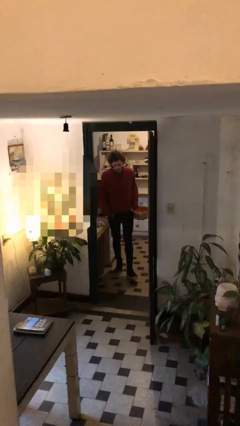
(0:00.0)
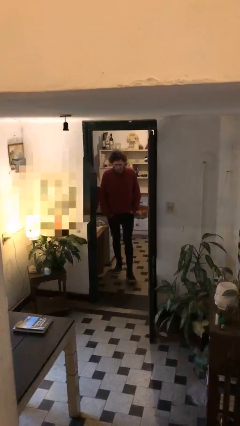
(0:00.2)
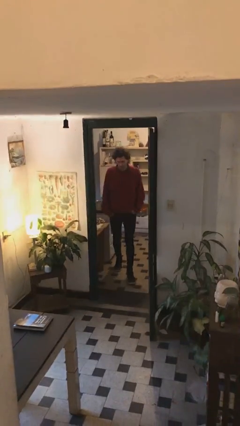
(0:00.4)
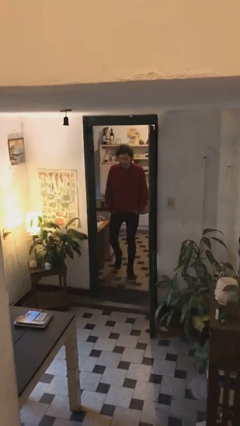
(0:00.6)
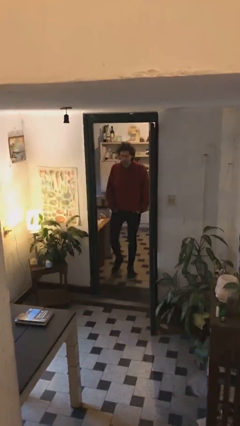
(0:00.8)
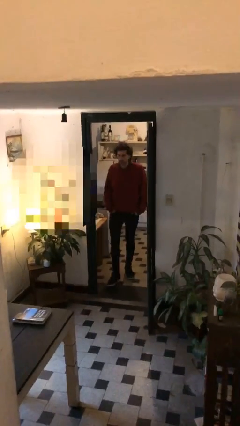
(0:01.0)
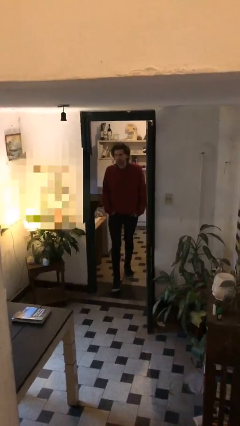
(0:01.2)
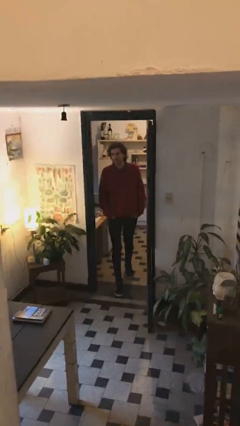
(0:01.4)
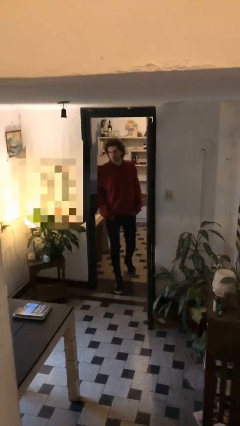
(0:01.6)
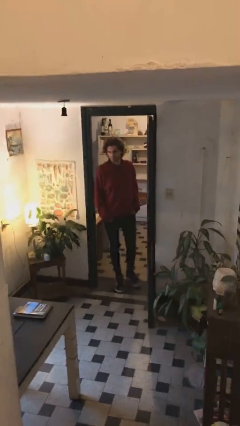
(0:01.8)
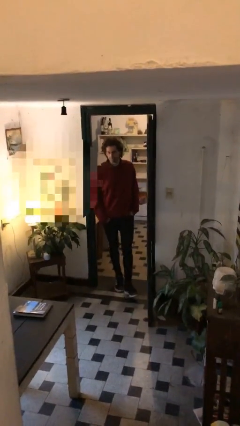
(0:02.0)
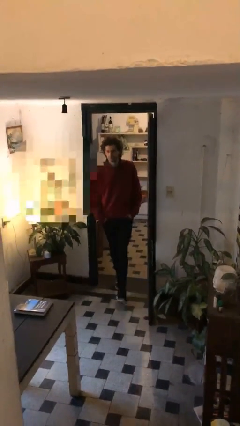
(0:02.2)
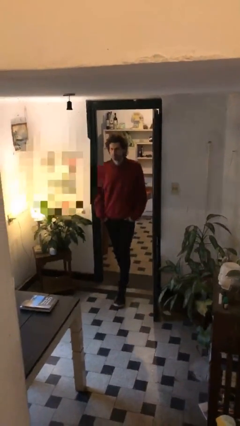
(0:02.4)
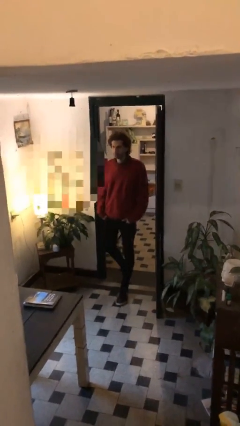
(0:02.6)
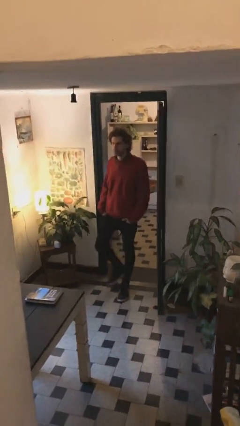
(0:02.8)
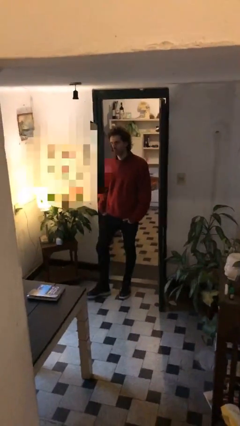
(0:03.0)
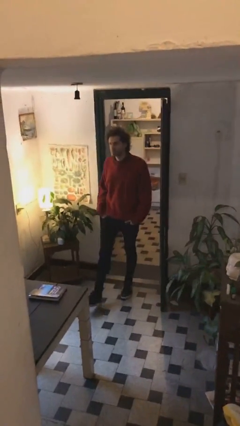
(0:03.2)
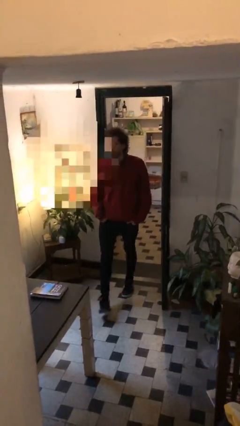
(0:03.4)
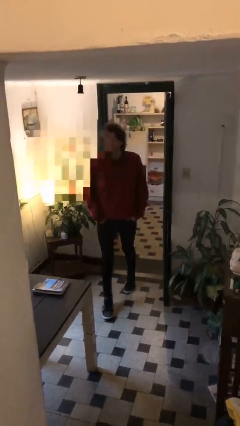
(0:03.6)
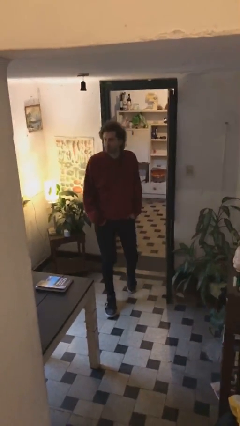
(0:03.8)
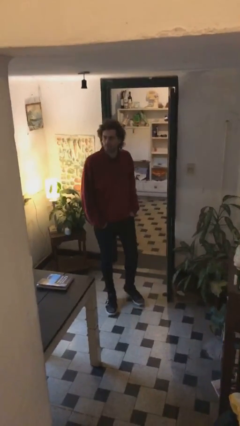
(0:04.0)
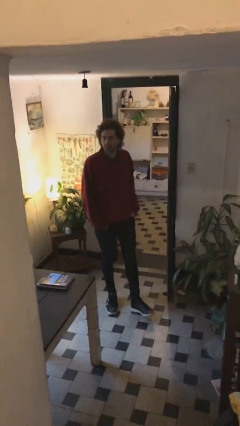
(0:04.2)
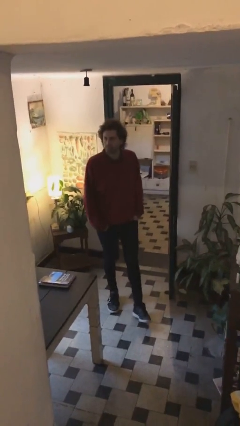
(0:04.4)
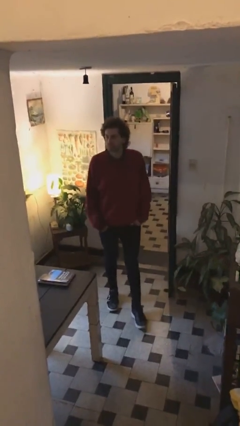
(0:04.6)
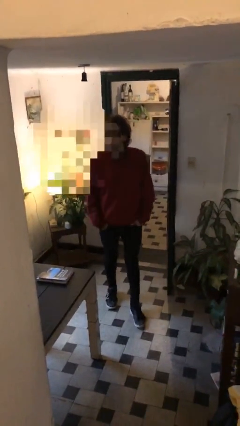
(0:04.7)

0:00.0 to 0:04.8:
person enters scene through structure

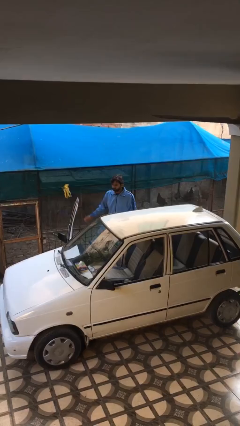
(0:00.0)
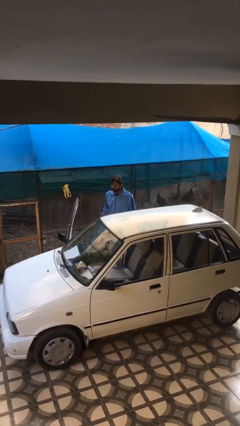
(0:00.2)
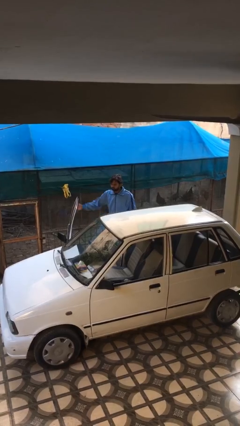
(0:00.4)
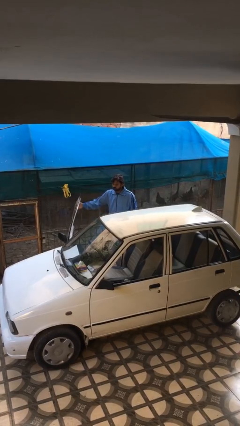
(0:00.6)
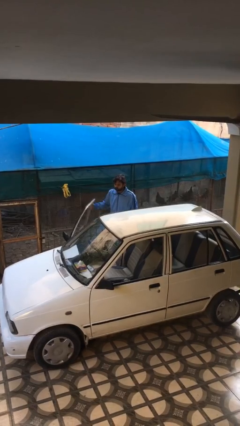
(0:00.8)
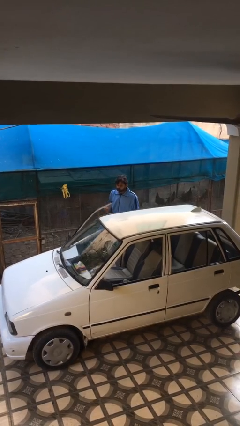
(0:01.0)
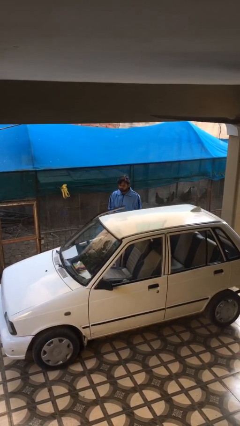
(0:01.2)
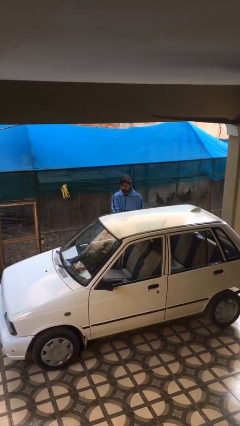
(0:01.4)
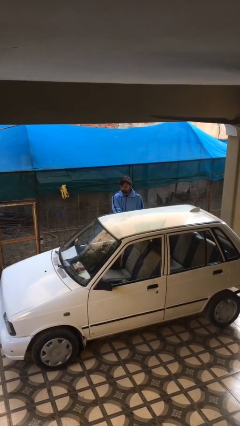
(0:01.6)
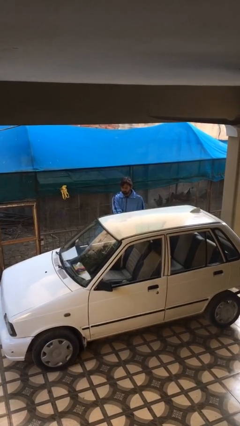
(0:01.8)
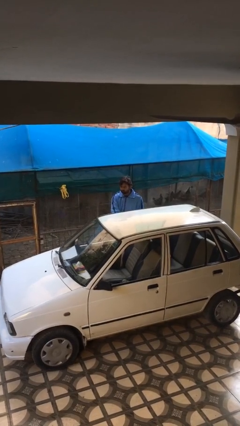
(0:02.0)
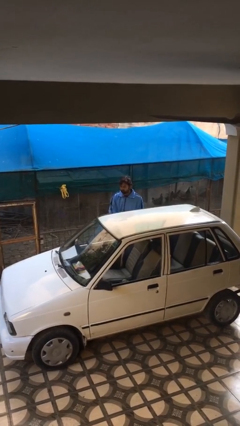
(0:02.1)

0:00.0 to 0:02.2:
person closes car door

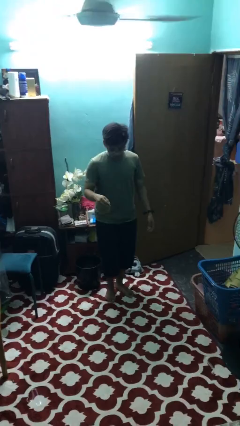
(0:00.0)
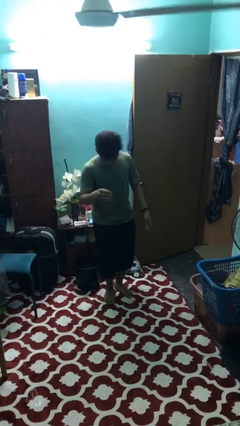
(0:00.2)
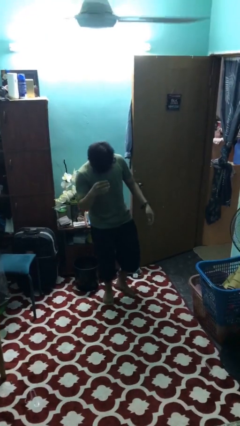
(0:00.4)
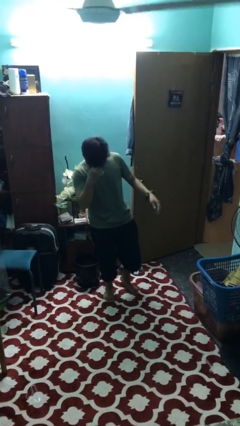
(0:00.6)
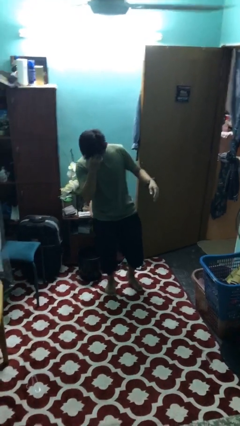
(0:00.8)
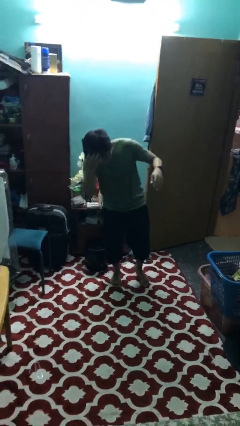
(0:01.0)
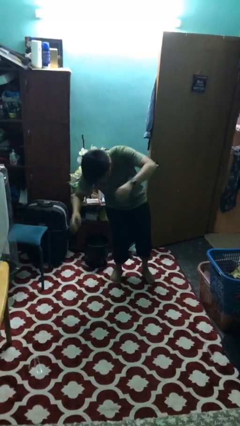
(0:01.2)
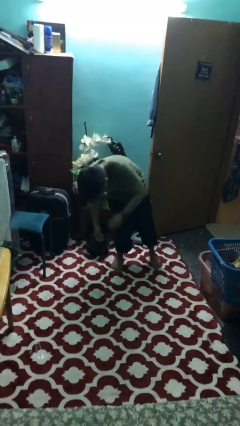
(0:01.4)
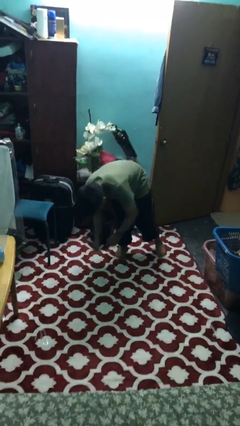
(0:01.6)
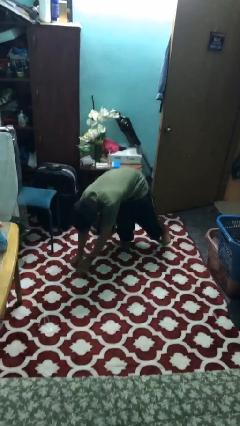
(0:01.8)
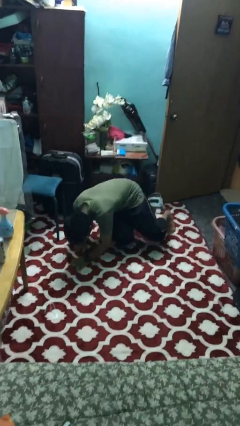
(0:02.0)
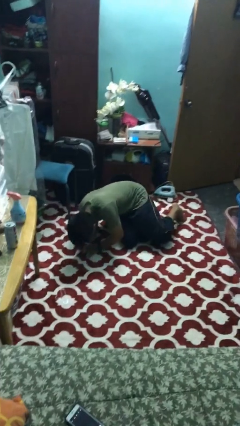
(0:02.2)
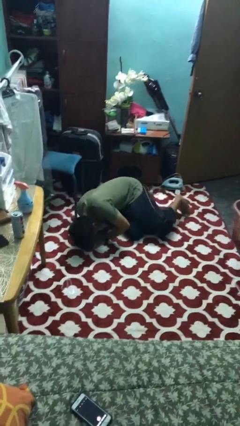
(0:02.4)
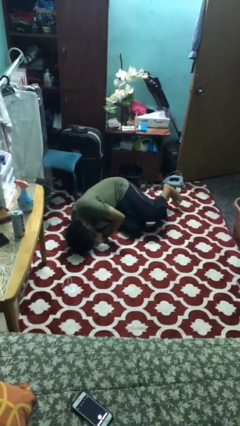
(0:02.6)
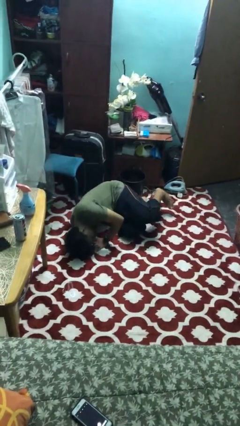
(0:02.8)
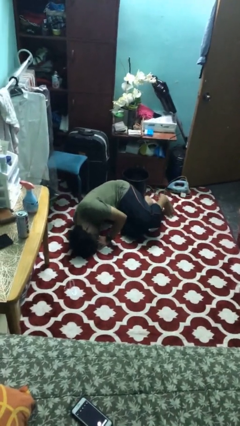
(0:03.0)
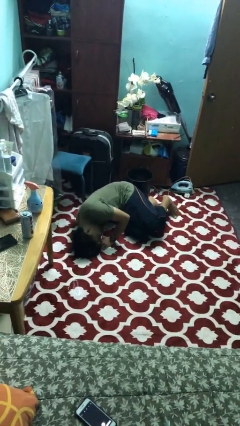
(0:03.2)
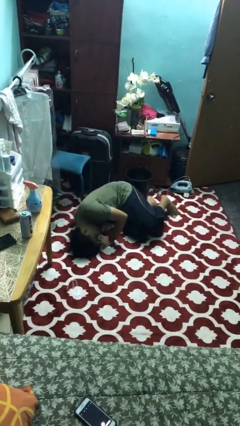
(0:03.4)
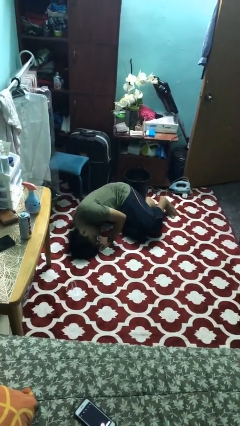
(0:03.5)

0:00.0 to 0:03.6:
person falls while standing

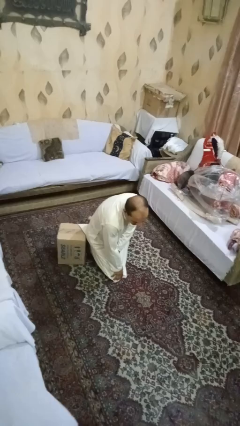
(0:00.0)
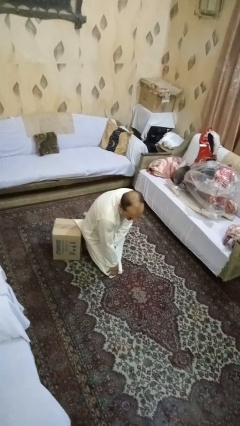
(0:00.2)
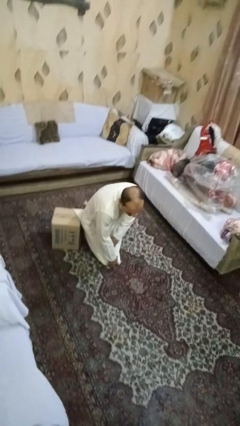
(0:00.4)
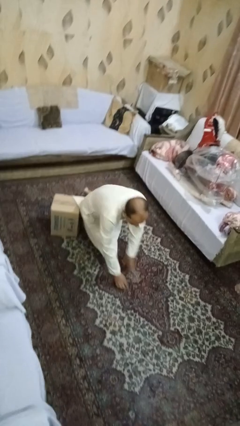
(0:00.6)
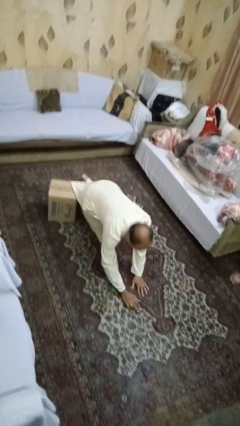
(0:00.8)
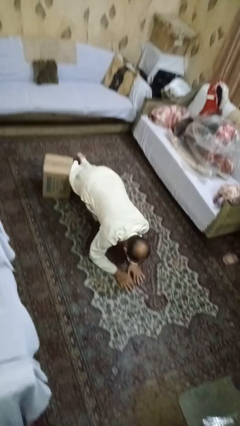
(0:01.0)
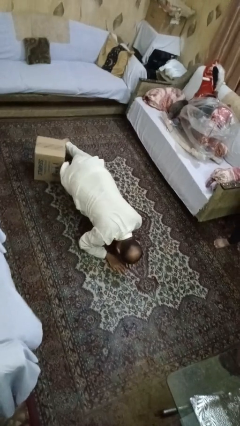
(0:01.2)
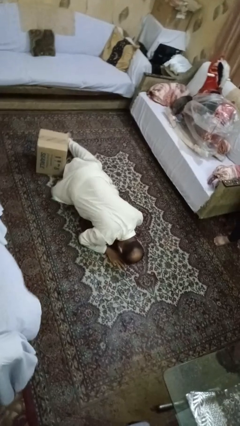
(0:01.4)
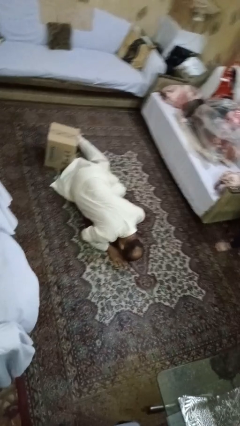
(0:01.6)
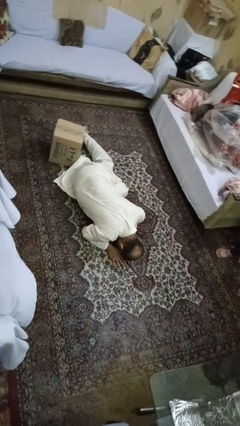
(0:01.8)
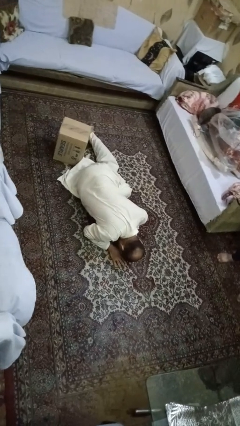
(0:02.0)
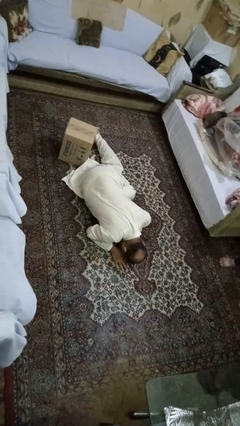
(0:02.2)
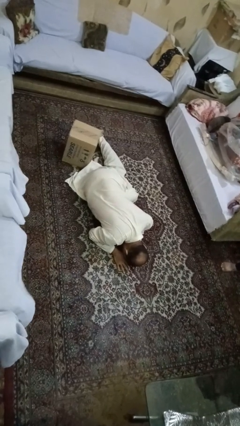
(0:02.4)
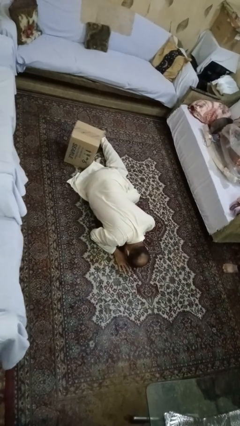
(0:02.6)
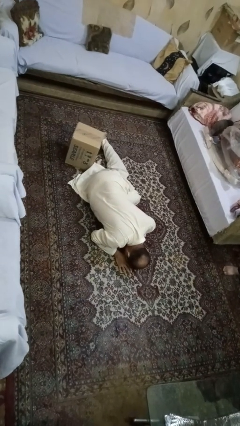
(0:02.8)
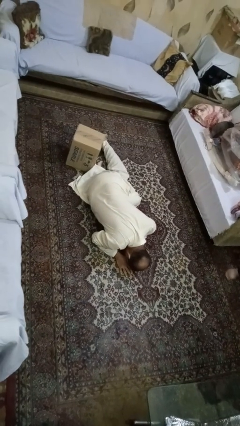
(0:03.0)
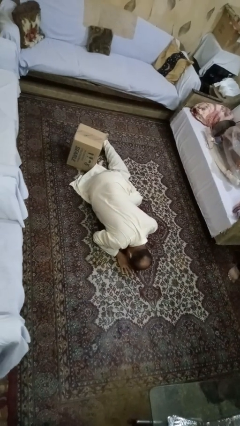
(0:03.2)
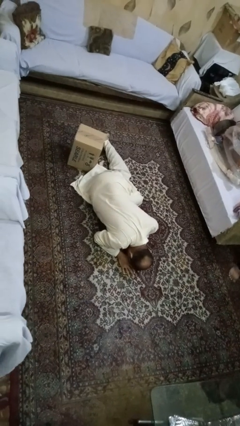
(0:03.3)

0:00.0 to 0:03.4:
person lies down on floor

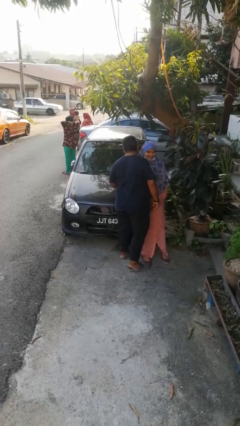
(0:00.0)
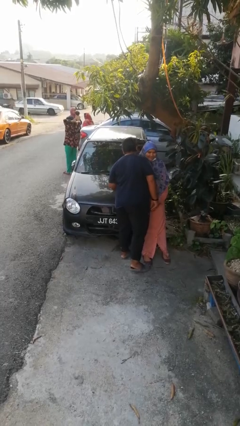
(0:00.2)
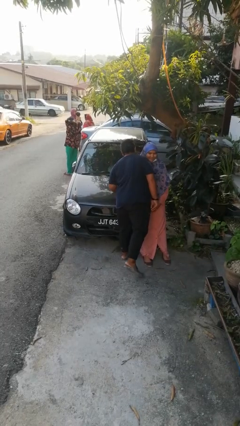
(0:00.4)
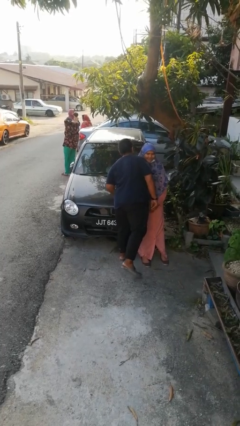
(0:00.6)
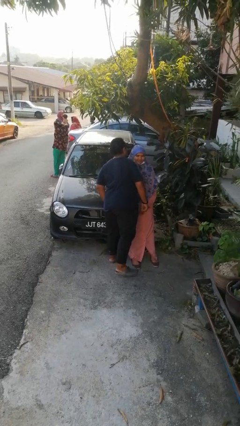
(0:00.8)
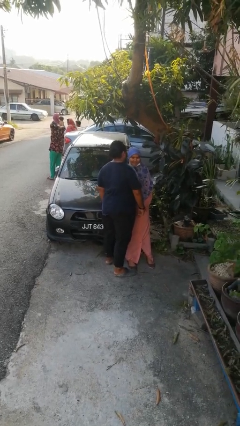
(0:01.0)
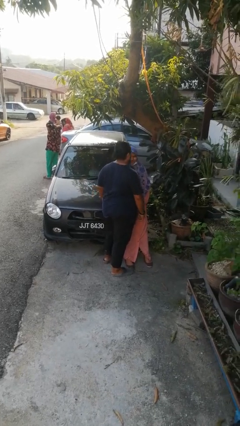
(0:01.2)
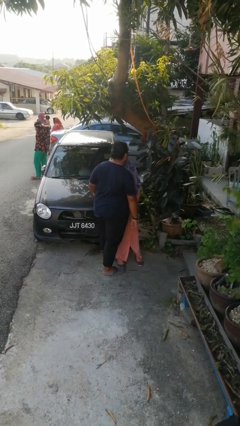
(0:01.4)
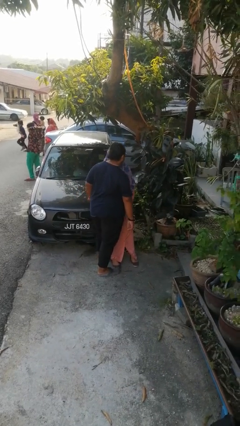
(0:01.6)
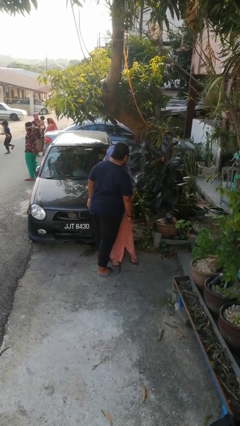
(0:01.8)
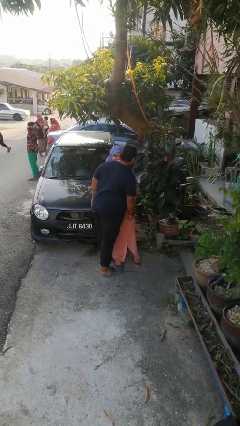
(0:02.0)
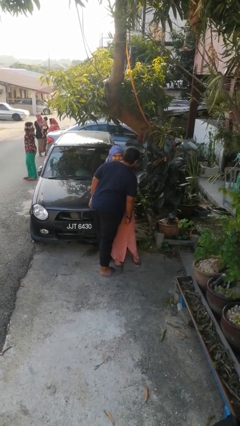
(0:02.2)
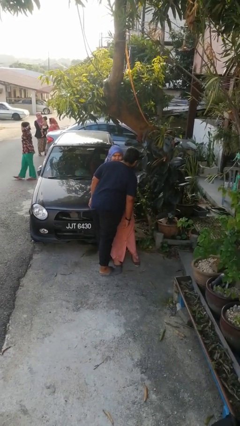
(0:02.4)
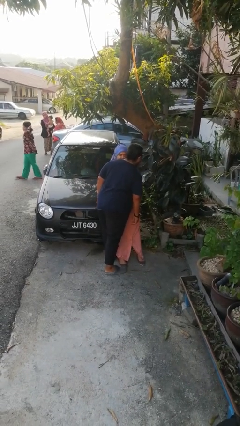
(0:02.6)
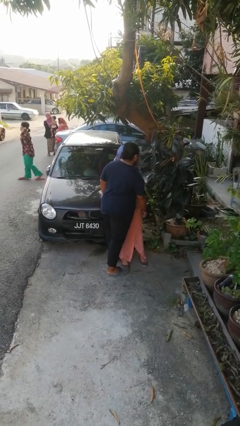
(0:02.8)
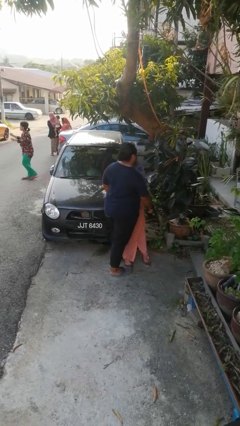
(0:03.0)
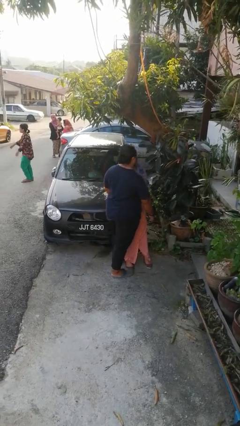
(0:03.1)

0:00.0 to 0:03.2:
person kisses cheek of person

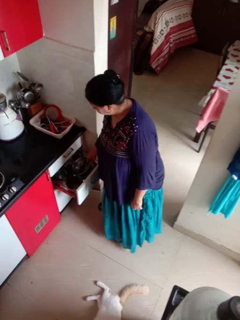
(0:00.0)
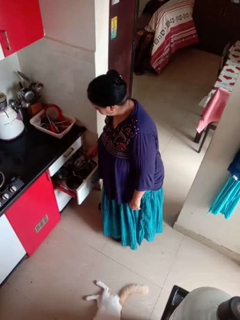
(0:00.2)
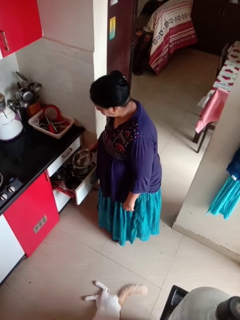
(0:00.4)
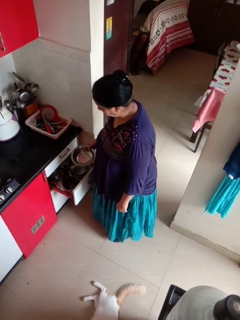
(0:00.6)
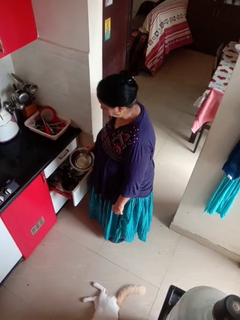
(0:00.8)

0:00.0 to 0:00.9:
person takes object from kitchen drawer
